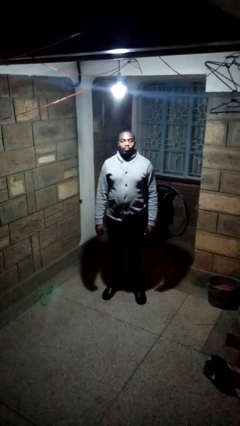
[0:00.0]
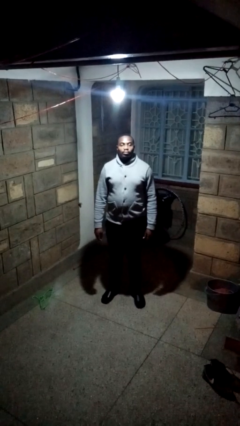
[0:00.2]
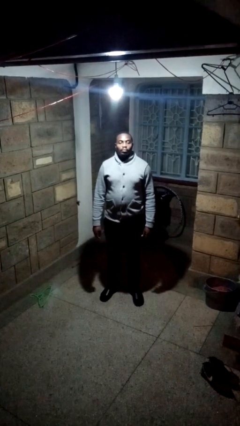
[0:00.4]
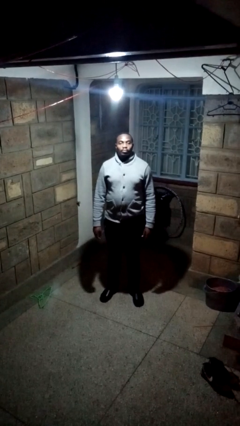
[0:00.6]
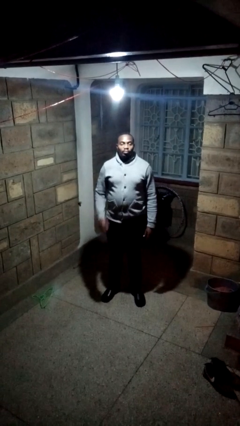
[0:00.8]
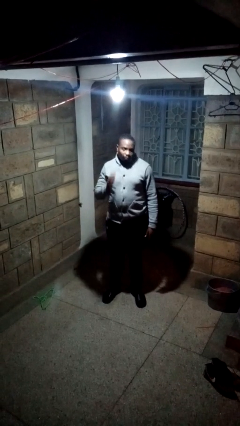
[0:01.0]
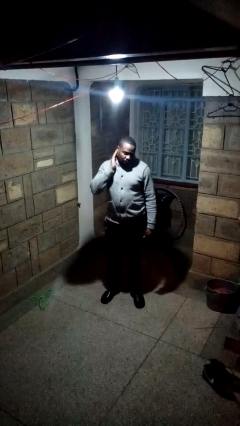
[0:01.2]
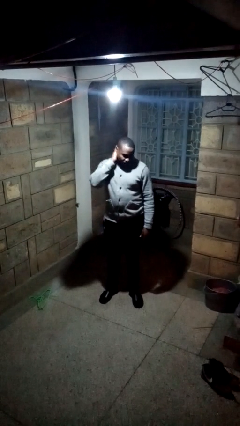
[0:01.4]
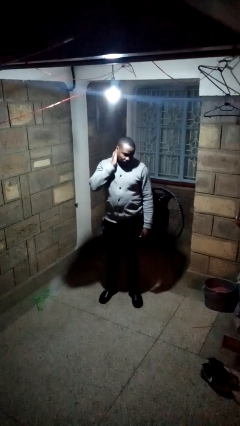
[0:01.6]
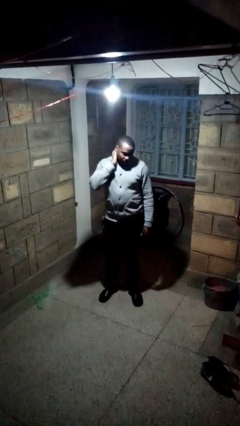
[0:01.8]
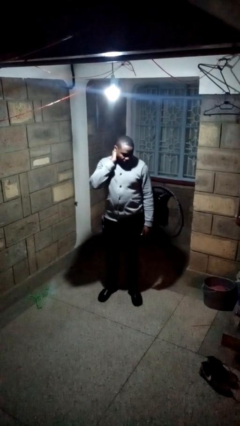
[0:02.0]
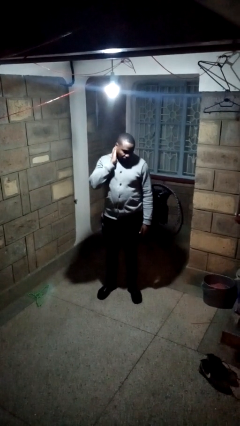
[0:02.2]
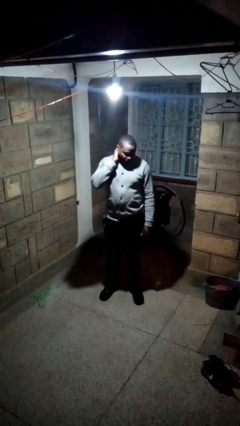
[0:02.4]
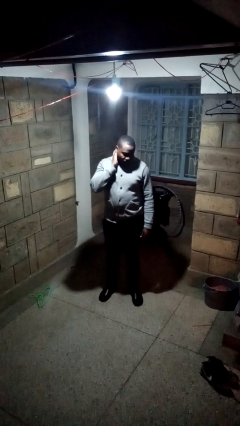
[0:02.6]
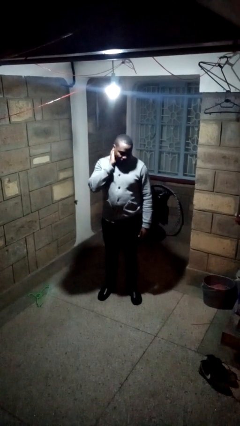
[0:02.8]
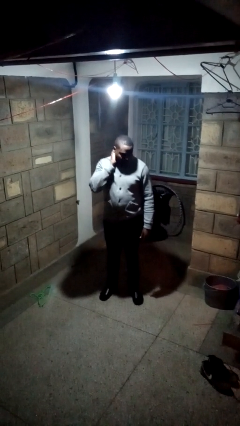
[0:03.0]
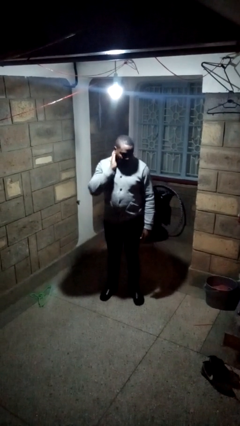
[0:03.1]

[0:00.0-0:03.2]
person rubs neck

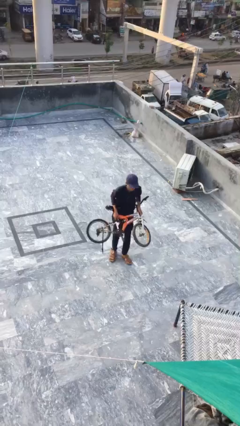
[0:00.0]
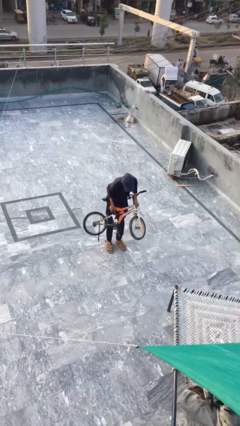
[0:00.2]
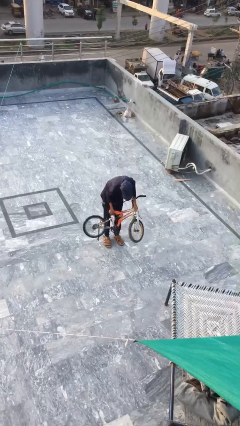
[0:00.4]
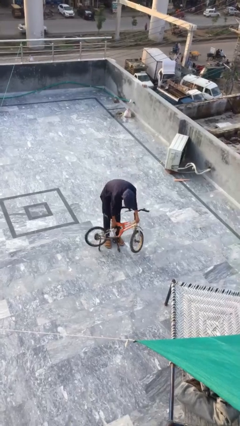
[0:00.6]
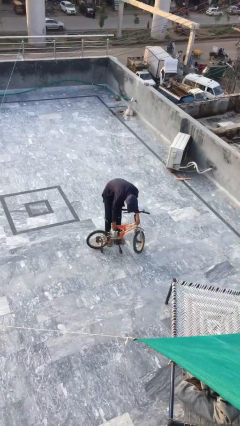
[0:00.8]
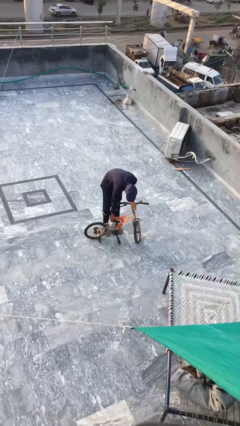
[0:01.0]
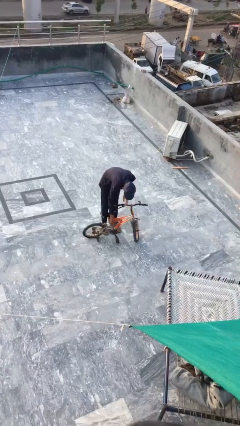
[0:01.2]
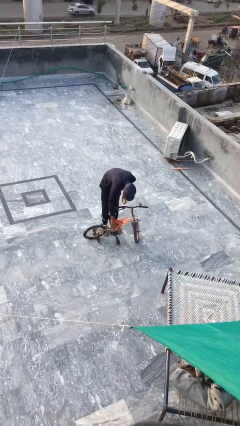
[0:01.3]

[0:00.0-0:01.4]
person puts down object on floor

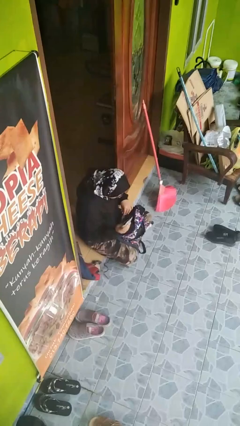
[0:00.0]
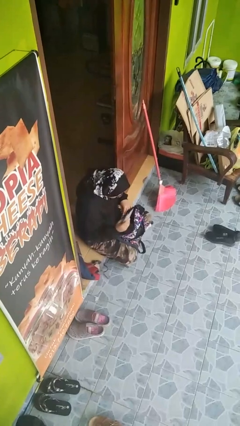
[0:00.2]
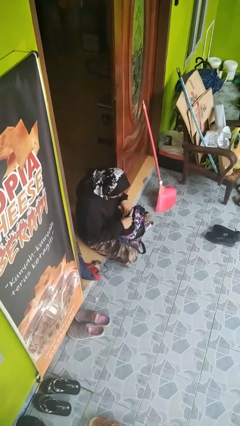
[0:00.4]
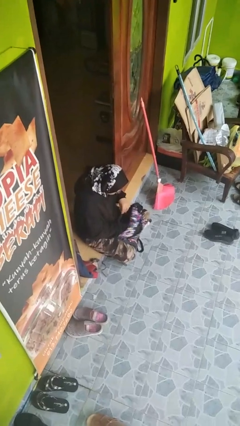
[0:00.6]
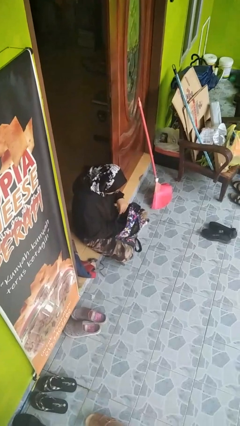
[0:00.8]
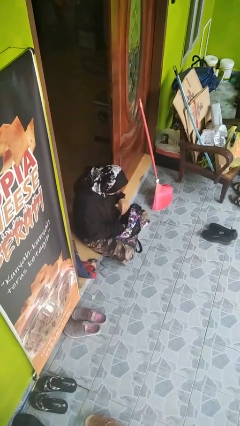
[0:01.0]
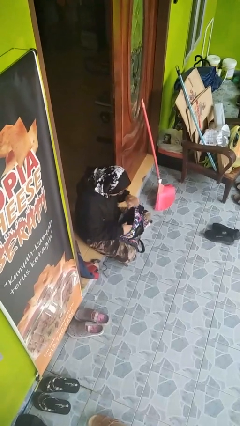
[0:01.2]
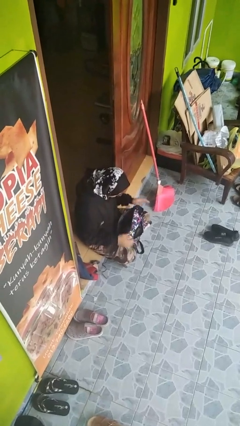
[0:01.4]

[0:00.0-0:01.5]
person puts object into purse

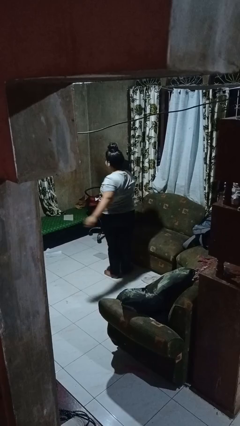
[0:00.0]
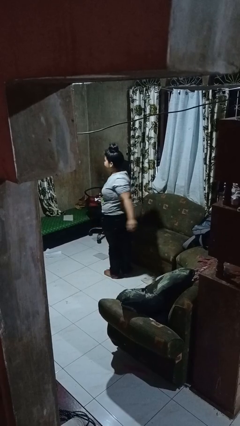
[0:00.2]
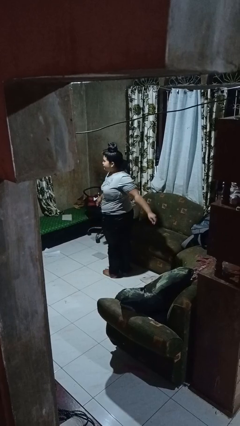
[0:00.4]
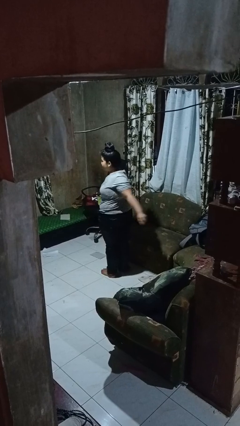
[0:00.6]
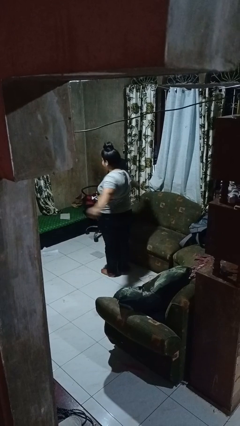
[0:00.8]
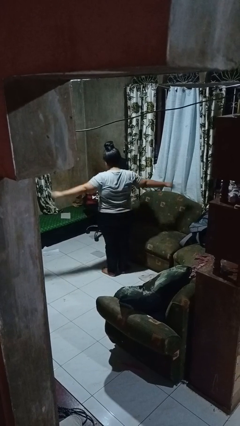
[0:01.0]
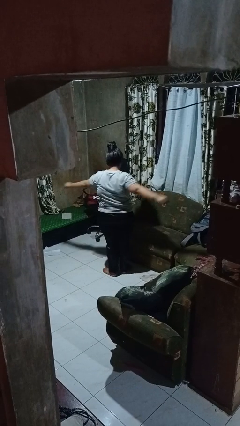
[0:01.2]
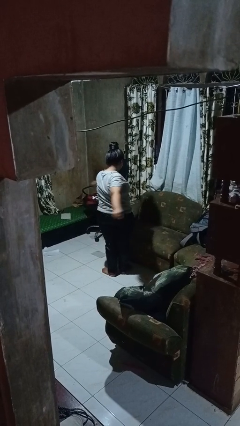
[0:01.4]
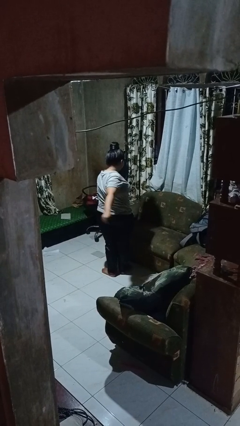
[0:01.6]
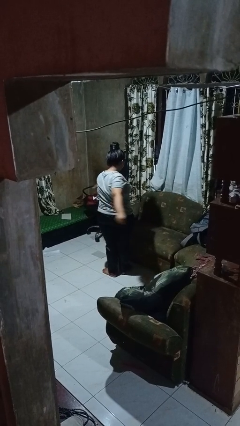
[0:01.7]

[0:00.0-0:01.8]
person stretches arms to side

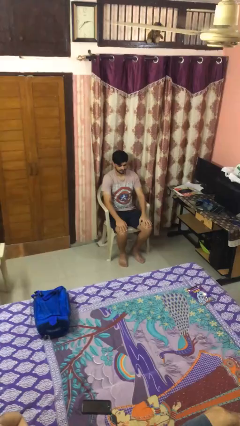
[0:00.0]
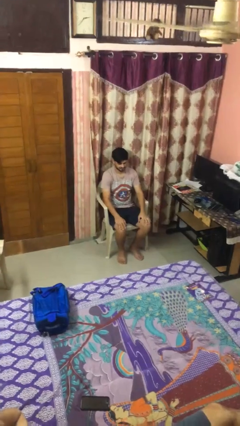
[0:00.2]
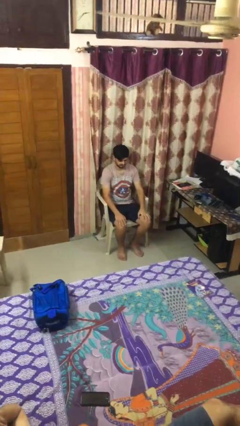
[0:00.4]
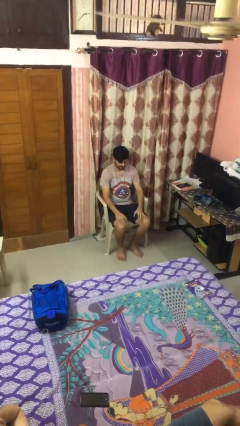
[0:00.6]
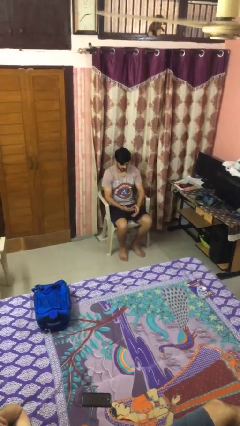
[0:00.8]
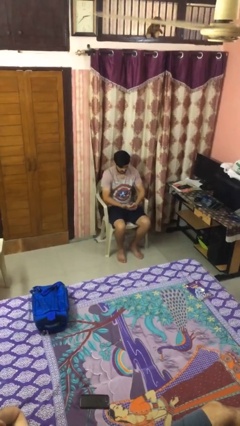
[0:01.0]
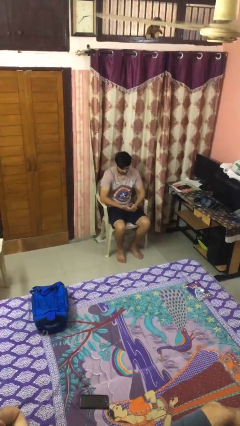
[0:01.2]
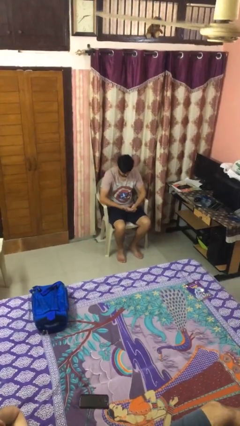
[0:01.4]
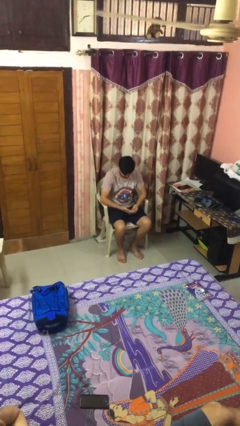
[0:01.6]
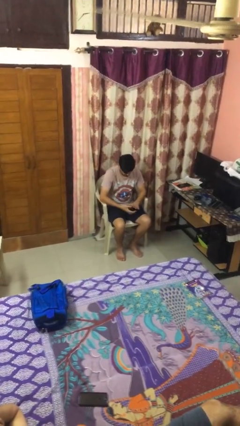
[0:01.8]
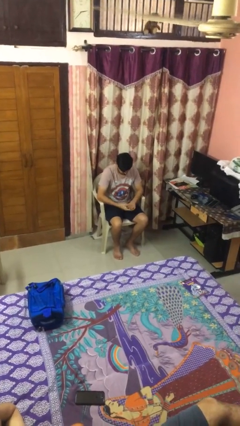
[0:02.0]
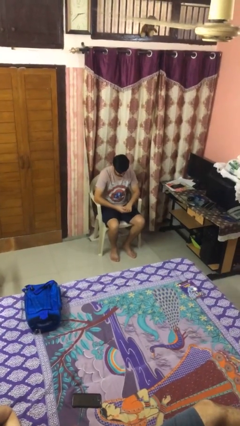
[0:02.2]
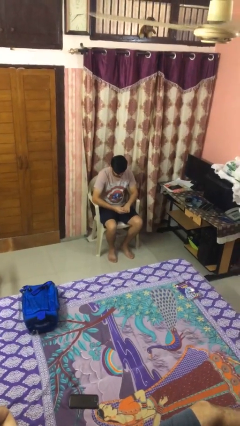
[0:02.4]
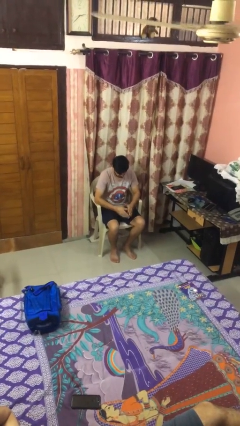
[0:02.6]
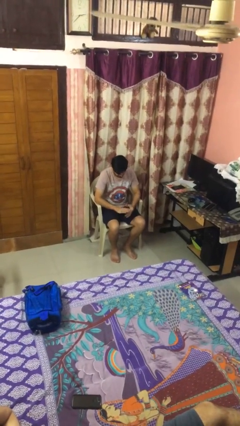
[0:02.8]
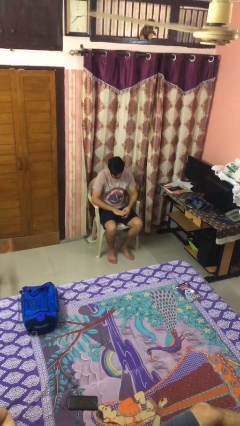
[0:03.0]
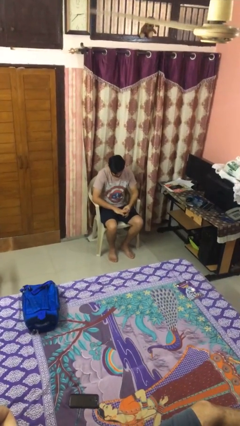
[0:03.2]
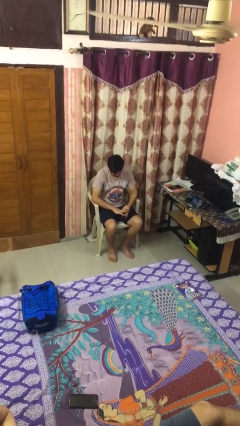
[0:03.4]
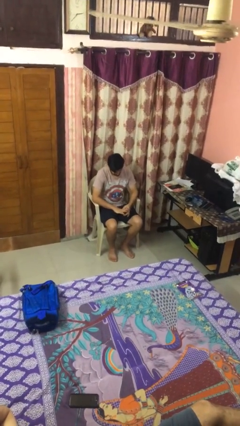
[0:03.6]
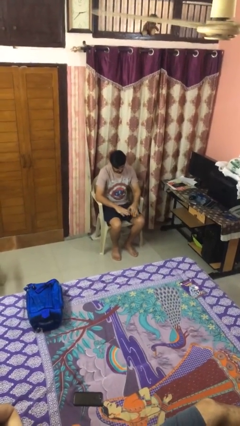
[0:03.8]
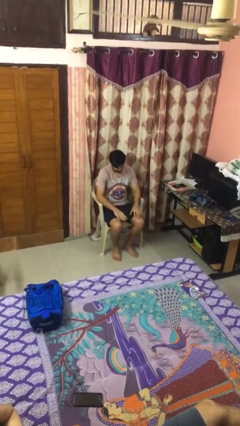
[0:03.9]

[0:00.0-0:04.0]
person looks at hands in lap

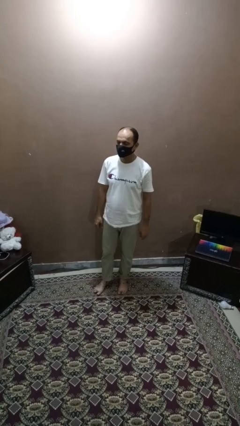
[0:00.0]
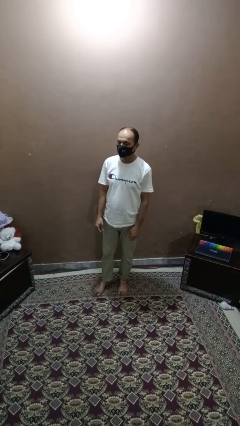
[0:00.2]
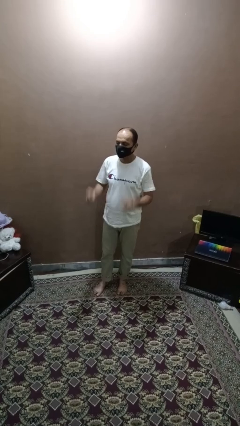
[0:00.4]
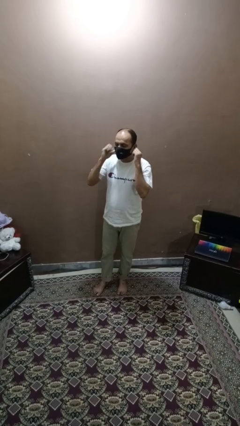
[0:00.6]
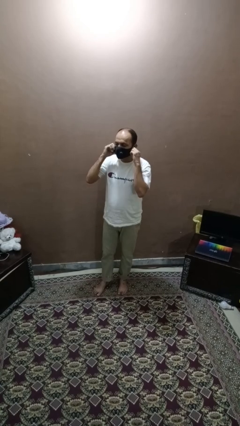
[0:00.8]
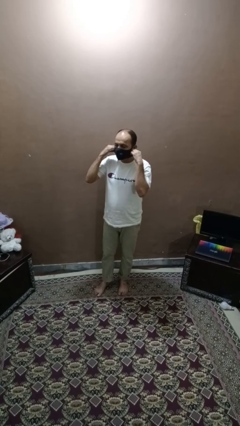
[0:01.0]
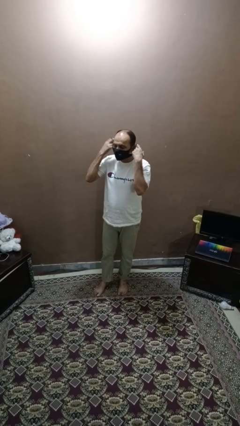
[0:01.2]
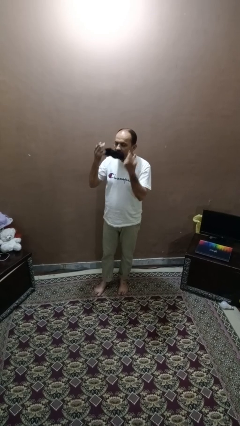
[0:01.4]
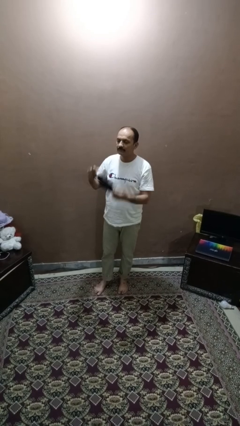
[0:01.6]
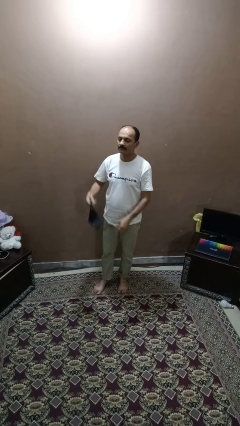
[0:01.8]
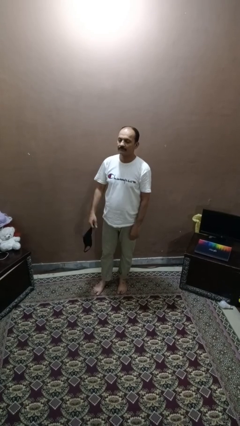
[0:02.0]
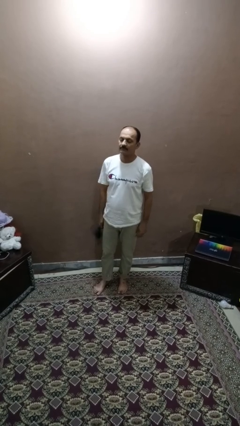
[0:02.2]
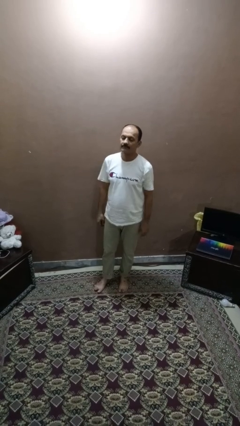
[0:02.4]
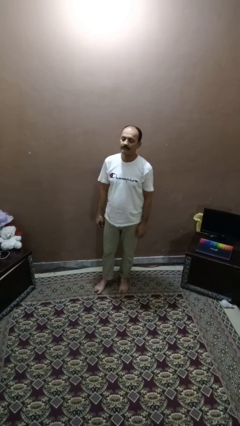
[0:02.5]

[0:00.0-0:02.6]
person takes off facemask

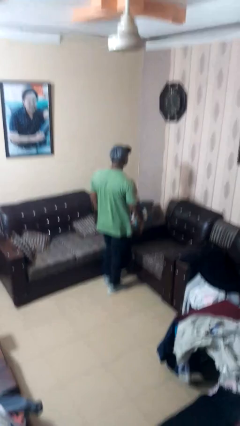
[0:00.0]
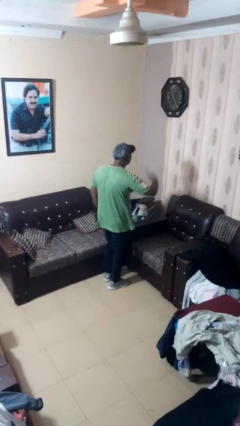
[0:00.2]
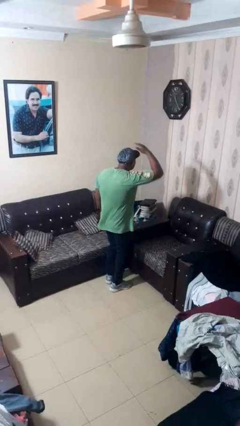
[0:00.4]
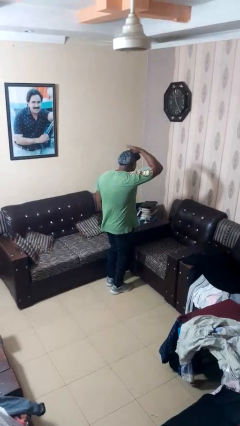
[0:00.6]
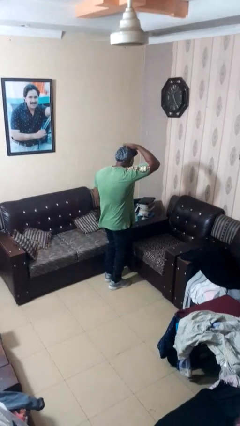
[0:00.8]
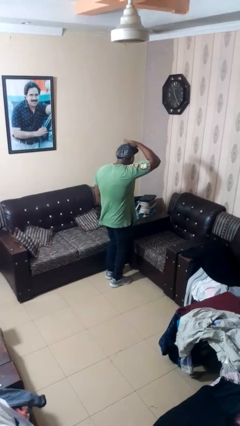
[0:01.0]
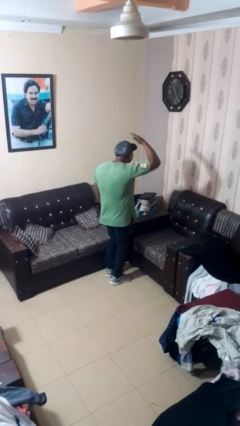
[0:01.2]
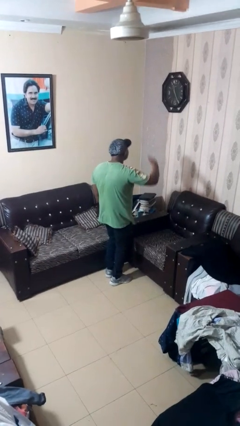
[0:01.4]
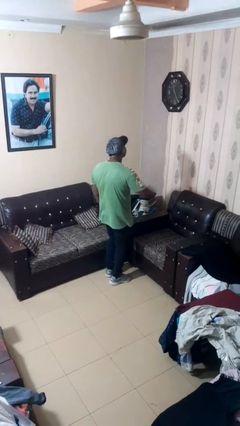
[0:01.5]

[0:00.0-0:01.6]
person pats head

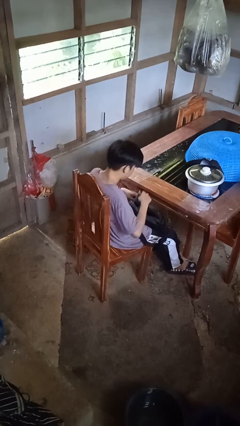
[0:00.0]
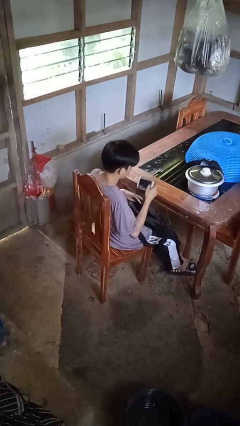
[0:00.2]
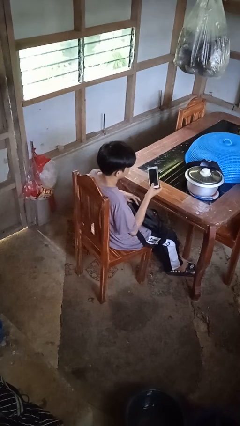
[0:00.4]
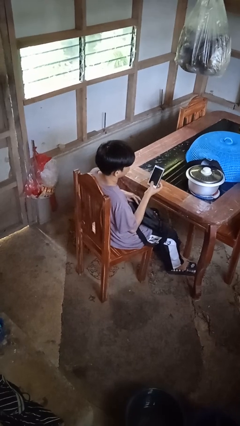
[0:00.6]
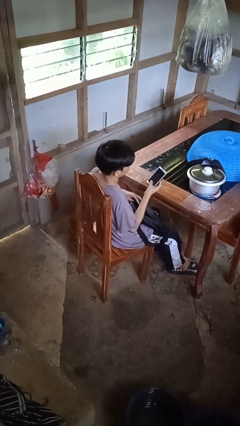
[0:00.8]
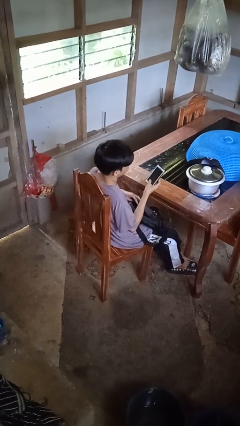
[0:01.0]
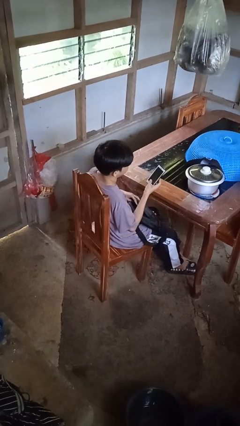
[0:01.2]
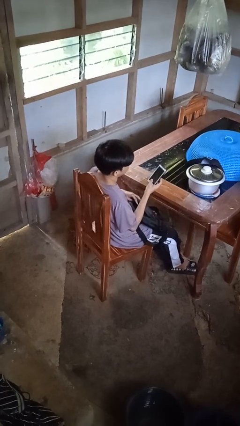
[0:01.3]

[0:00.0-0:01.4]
person takes object from purse
